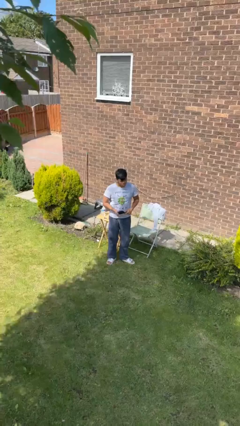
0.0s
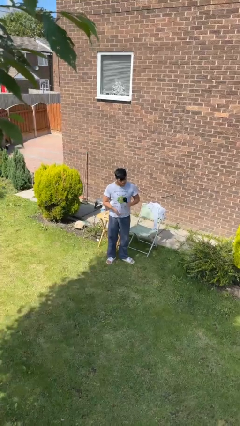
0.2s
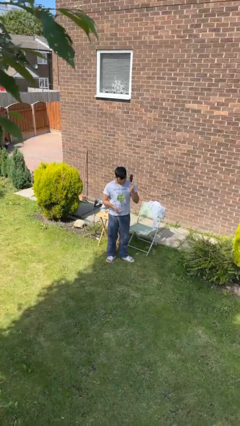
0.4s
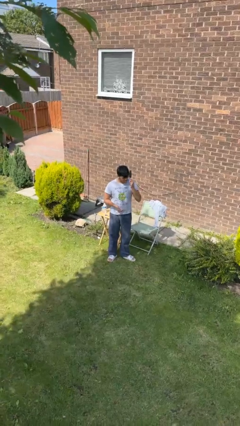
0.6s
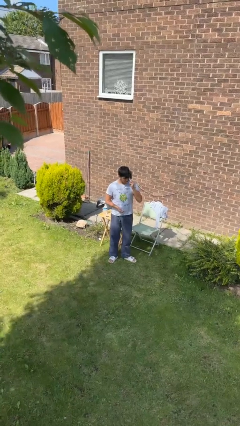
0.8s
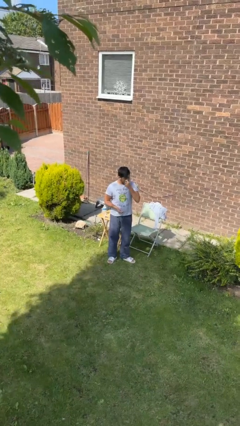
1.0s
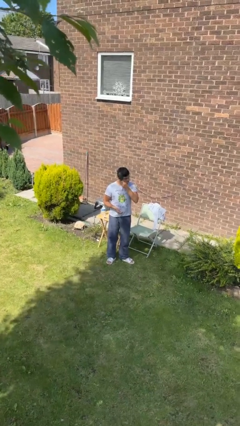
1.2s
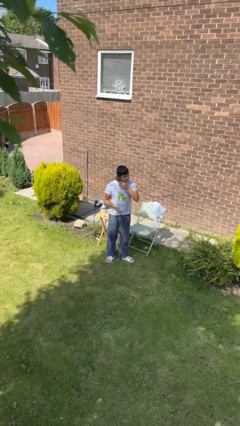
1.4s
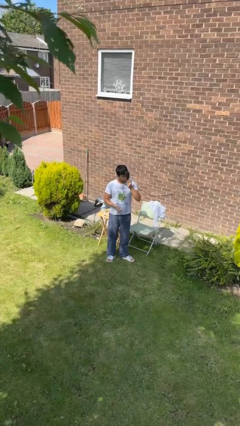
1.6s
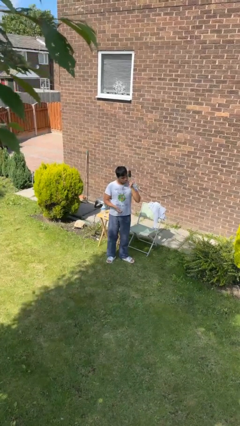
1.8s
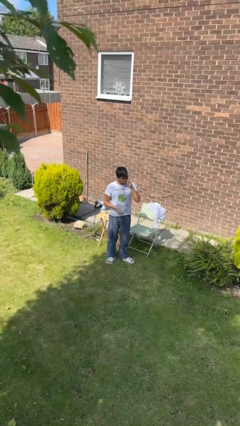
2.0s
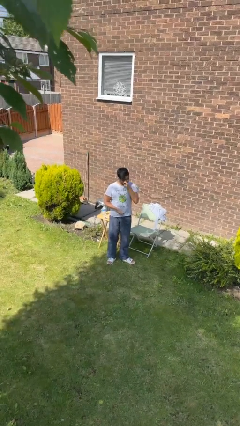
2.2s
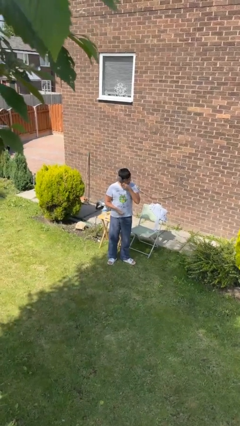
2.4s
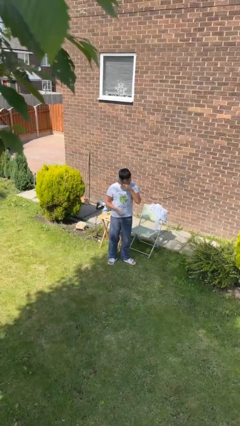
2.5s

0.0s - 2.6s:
person brushes hair

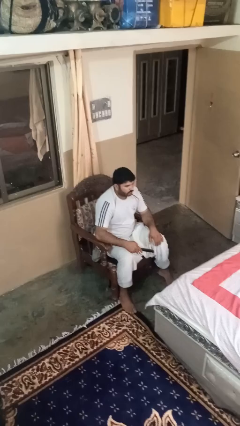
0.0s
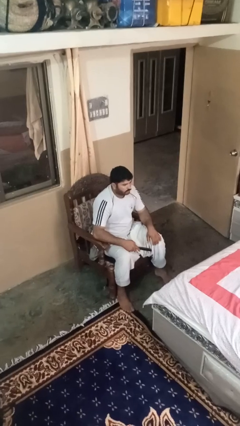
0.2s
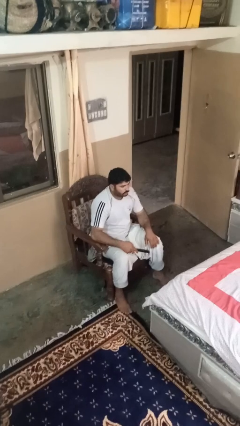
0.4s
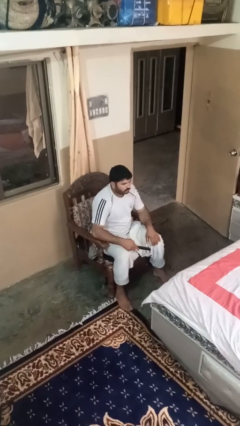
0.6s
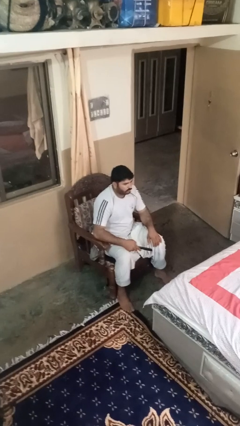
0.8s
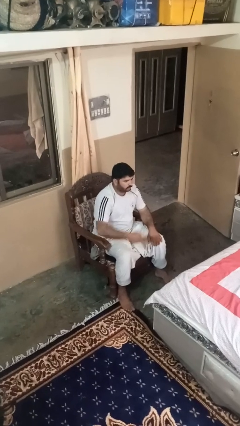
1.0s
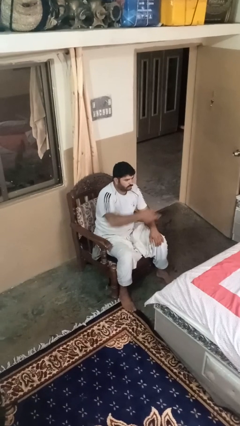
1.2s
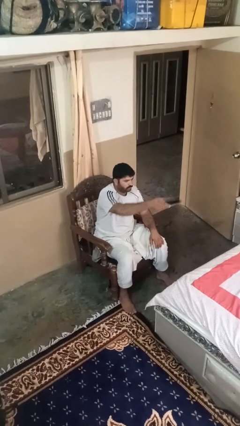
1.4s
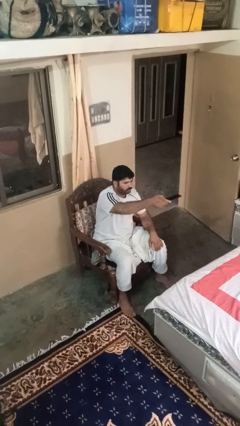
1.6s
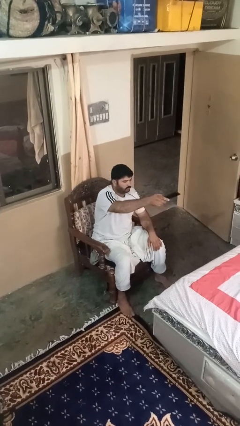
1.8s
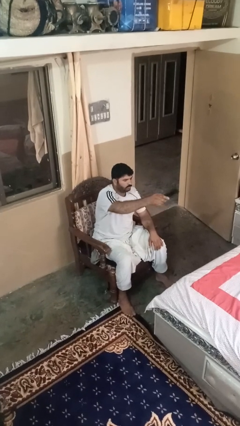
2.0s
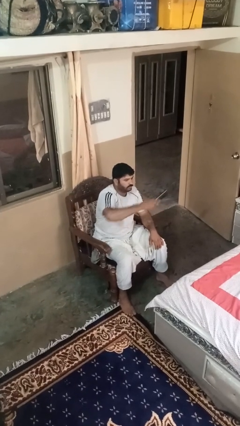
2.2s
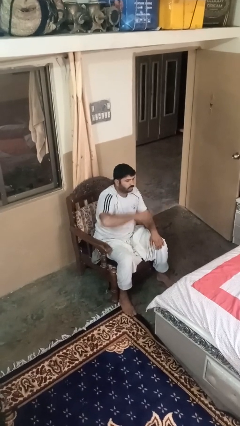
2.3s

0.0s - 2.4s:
person uses television remote

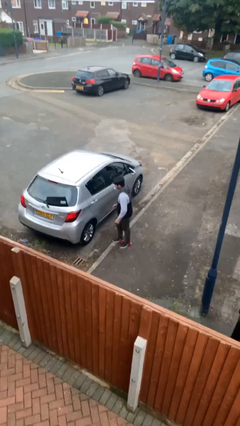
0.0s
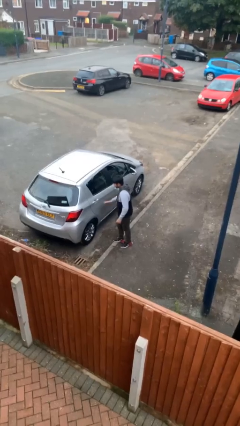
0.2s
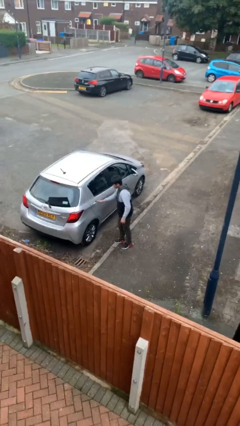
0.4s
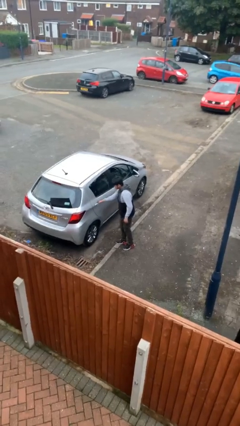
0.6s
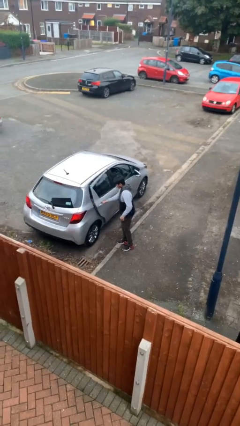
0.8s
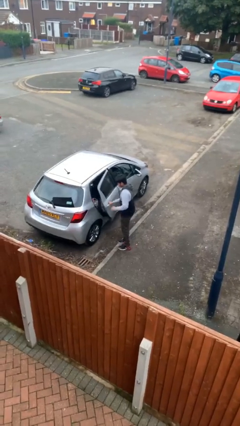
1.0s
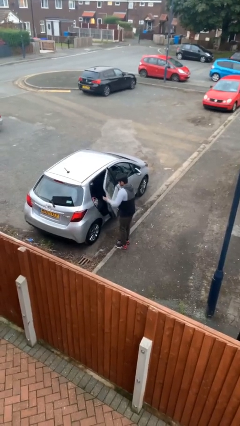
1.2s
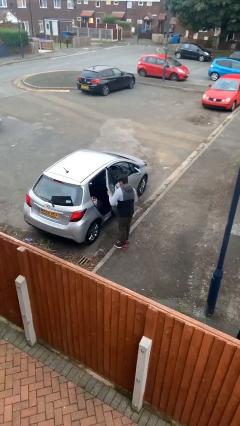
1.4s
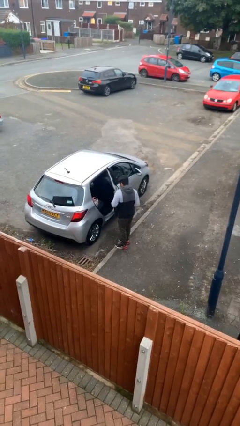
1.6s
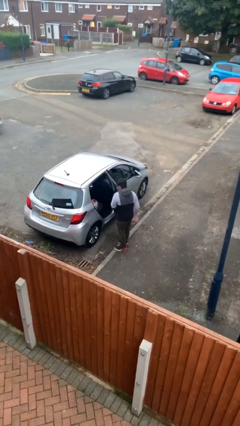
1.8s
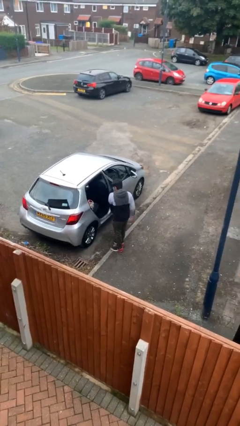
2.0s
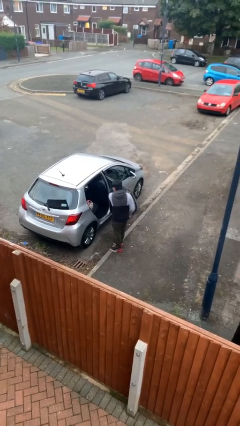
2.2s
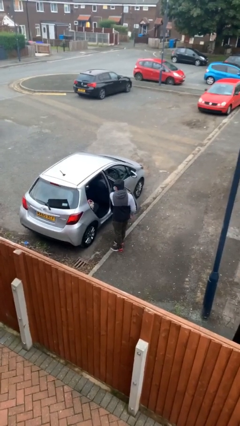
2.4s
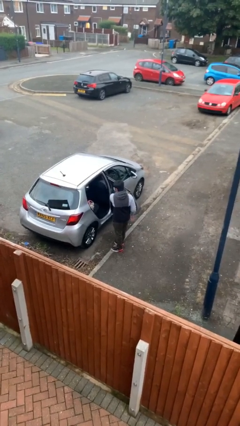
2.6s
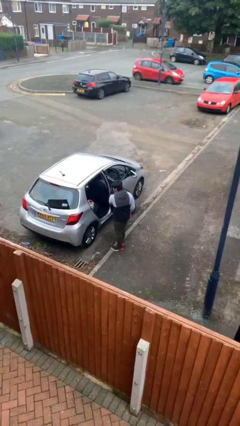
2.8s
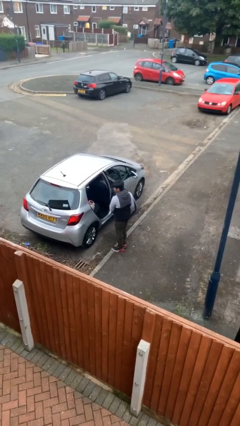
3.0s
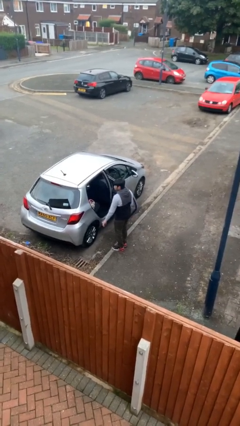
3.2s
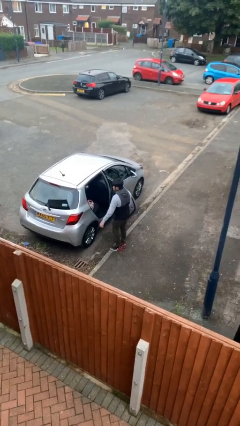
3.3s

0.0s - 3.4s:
person opens car door

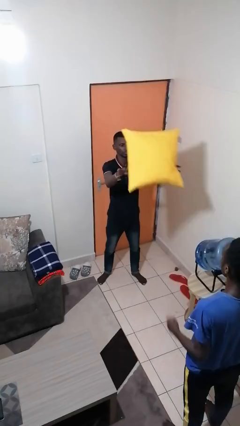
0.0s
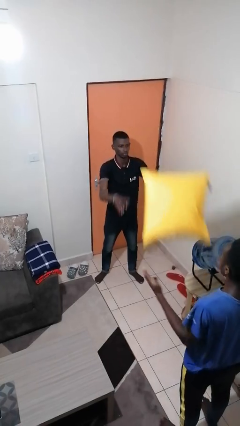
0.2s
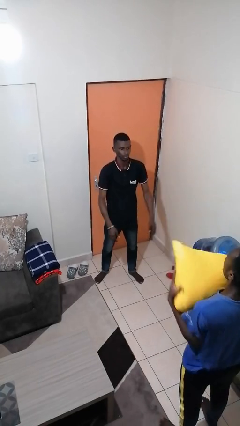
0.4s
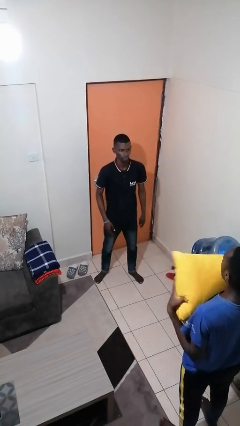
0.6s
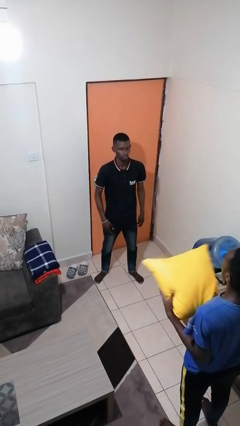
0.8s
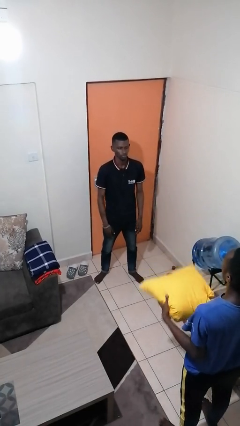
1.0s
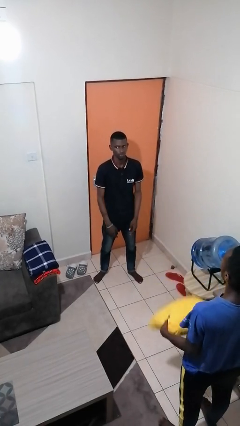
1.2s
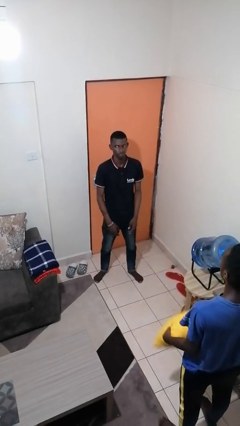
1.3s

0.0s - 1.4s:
person throws object to person

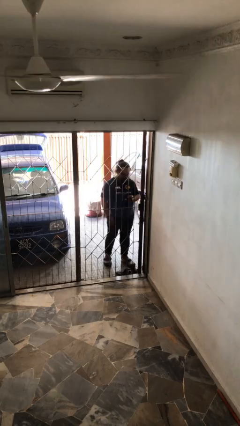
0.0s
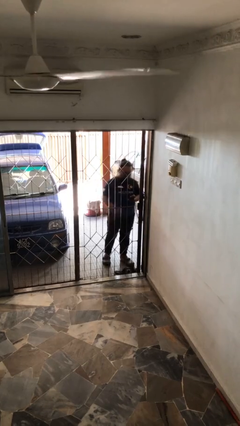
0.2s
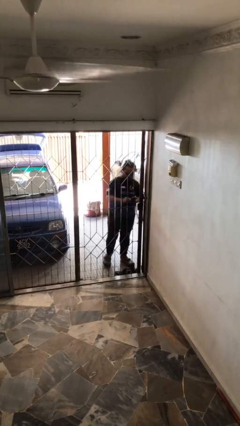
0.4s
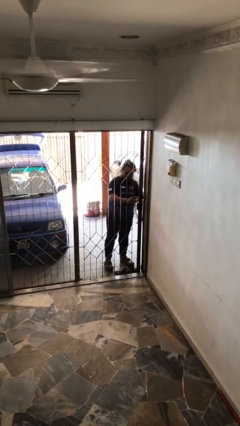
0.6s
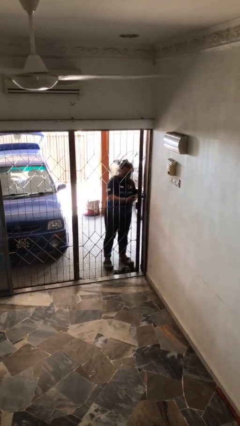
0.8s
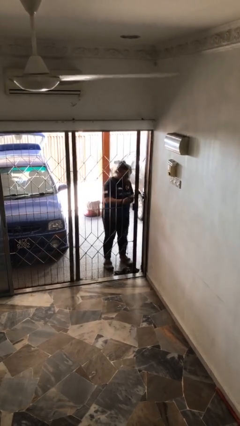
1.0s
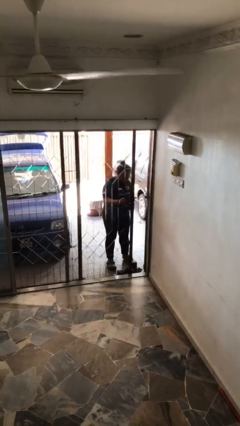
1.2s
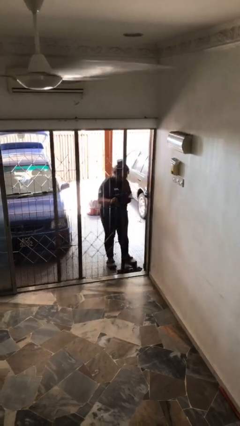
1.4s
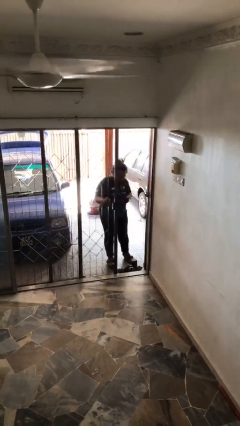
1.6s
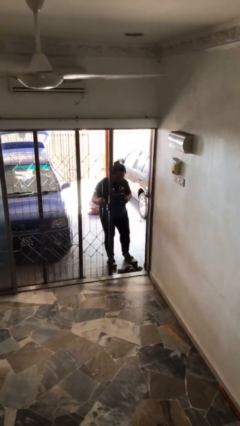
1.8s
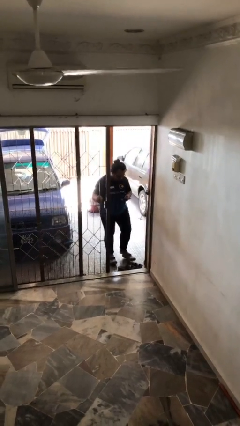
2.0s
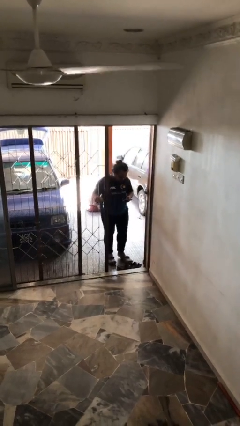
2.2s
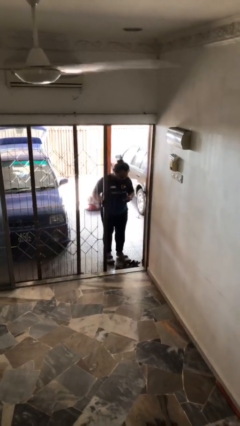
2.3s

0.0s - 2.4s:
person opens facility door

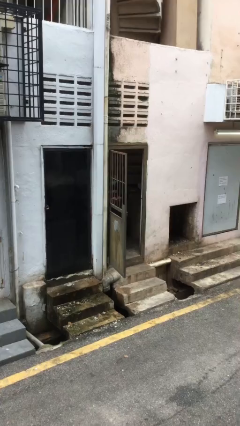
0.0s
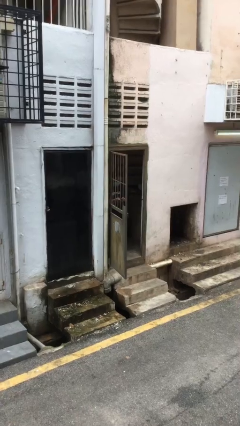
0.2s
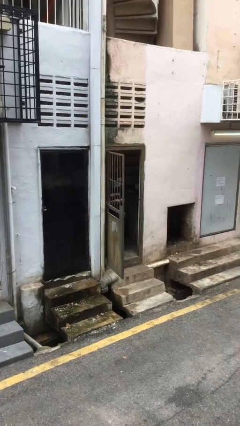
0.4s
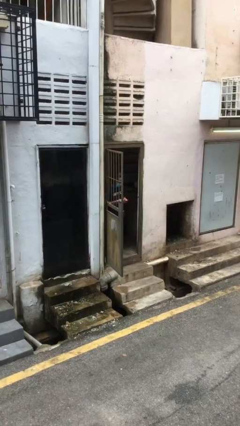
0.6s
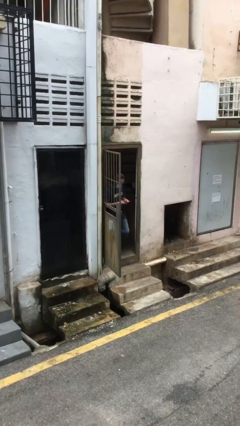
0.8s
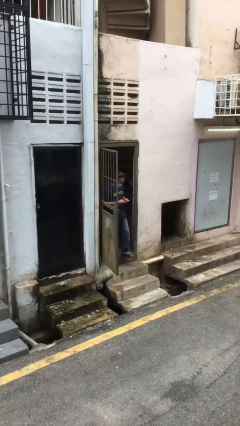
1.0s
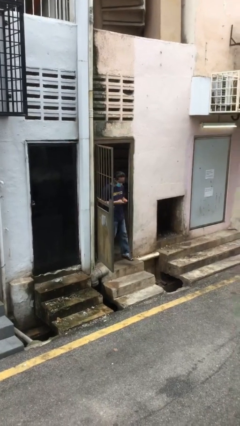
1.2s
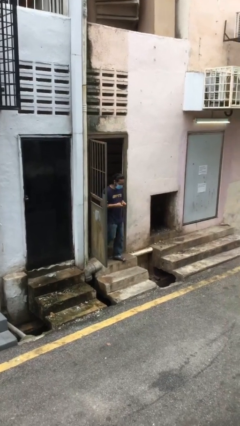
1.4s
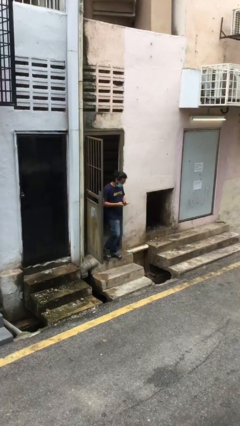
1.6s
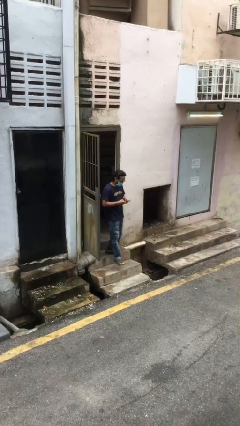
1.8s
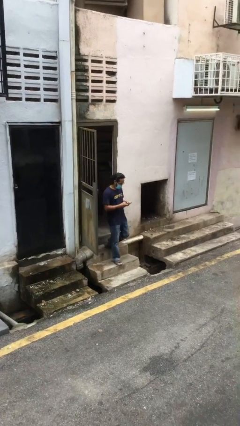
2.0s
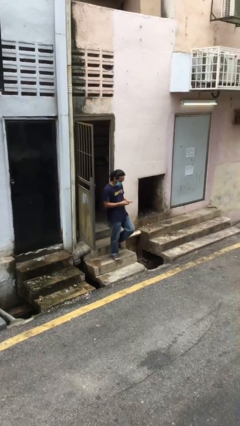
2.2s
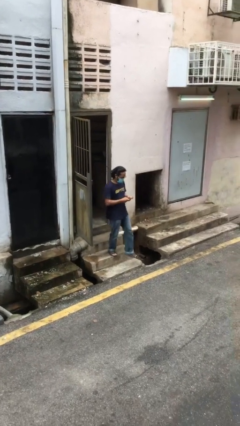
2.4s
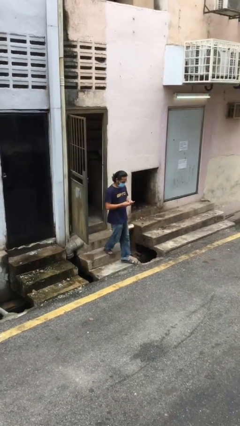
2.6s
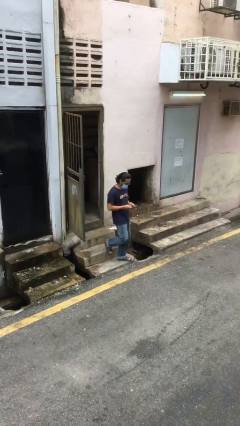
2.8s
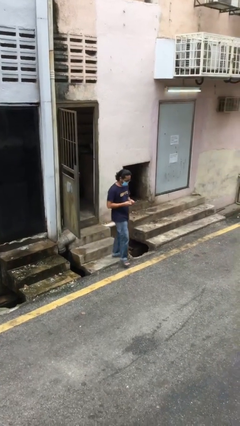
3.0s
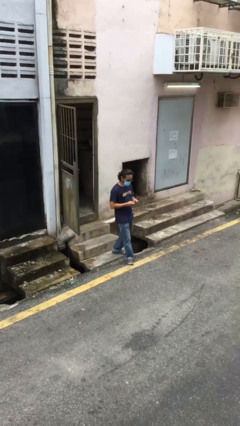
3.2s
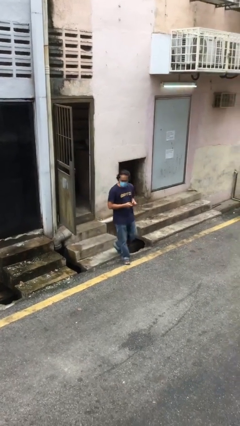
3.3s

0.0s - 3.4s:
person enters scene through structure

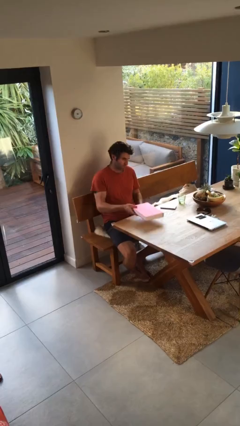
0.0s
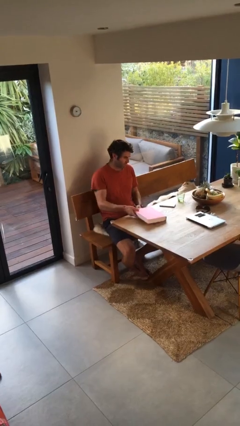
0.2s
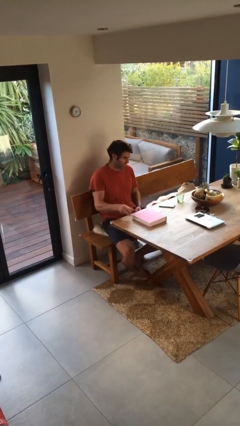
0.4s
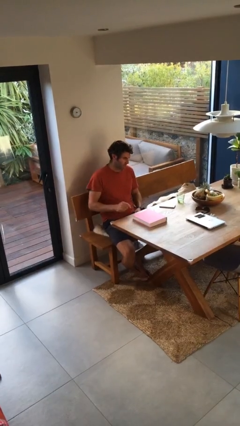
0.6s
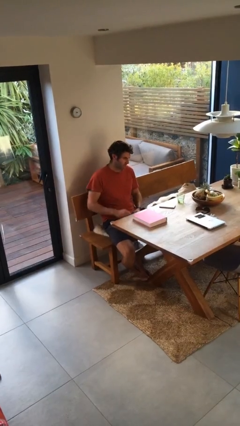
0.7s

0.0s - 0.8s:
person puts down object on table

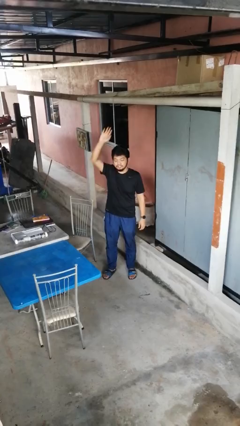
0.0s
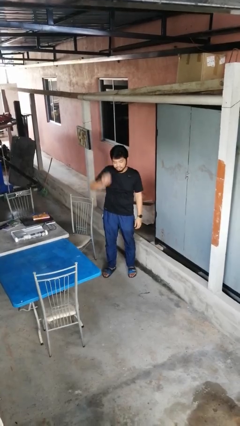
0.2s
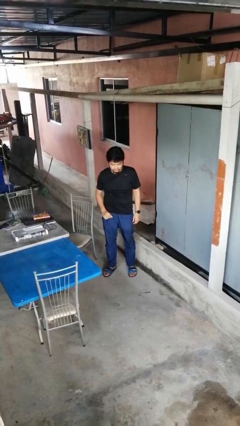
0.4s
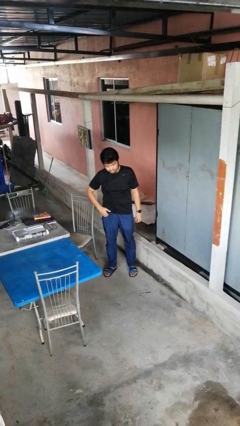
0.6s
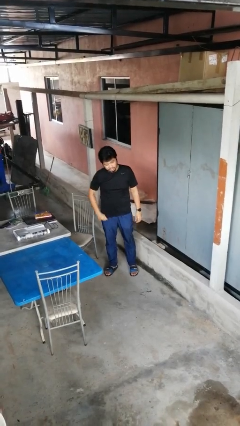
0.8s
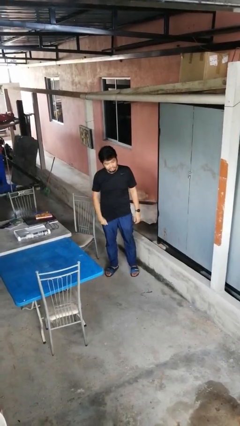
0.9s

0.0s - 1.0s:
person gestures lower hand
